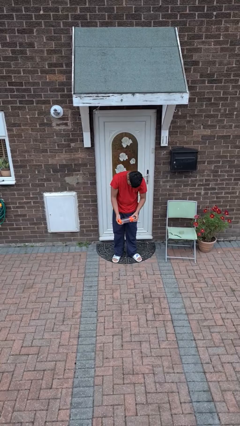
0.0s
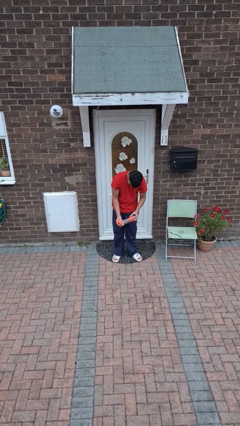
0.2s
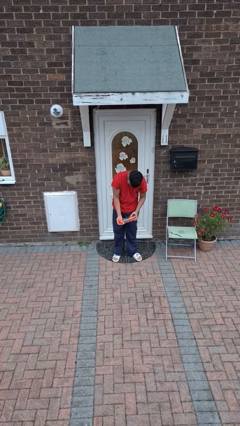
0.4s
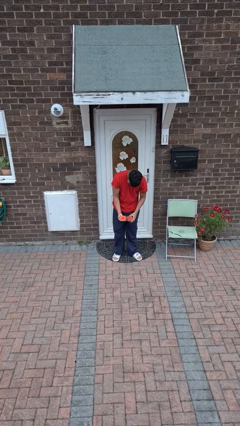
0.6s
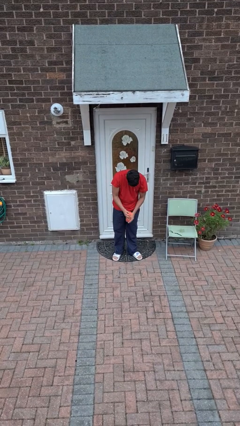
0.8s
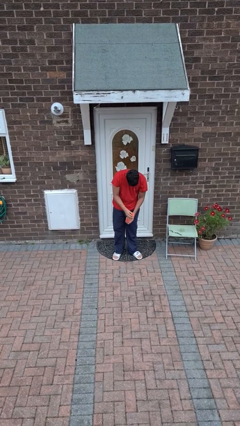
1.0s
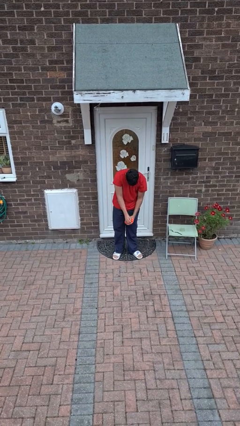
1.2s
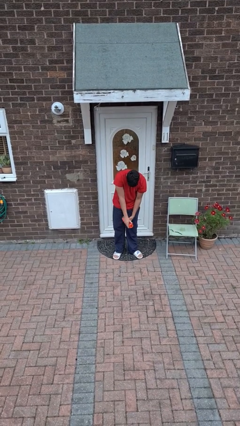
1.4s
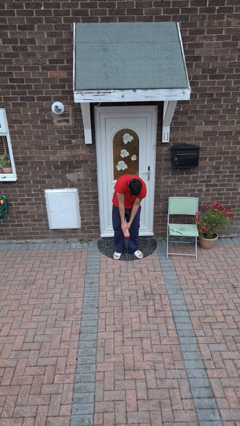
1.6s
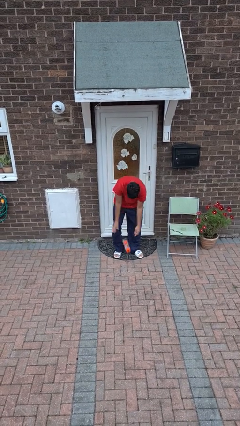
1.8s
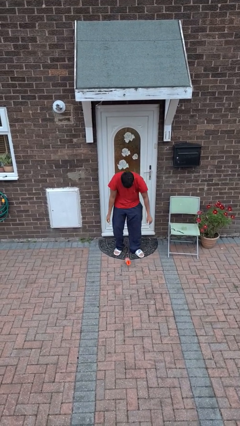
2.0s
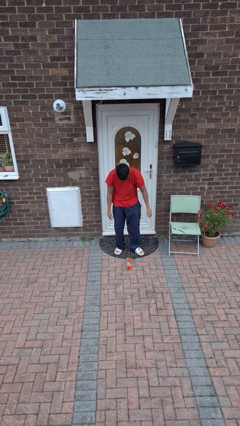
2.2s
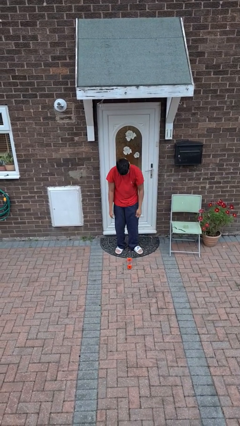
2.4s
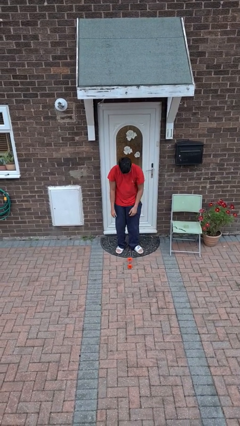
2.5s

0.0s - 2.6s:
person drops object

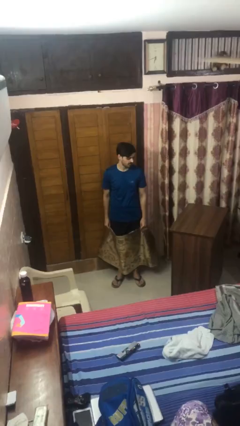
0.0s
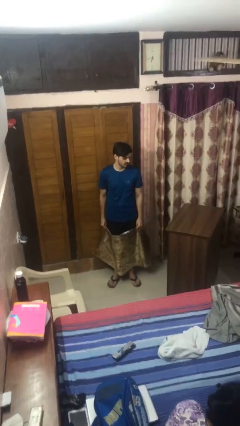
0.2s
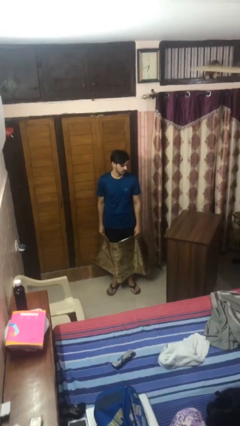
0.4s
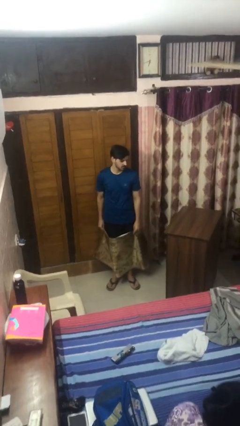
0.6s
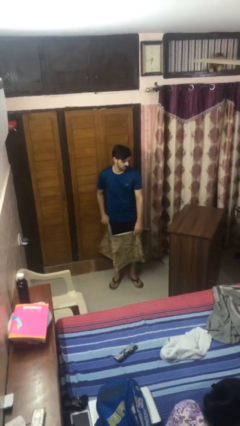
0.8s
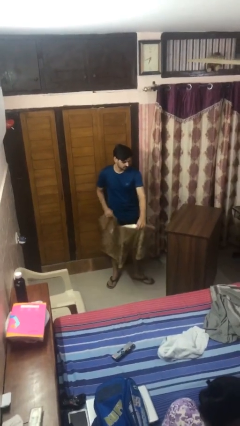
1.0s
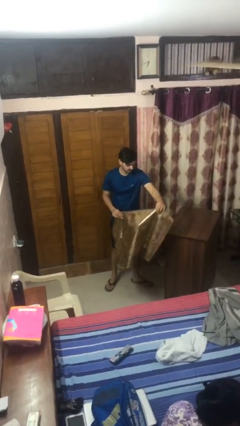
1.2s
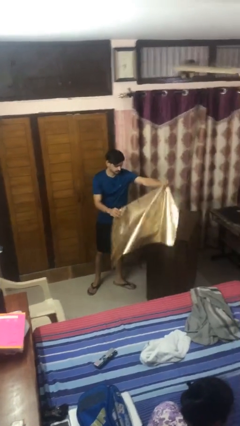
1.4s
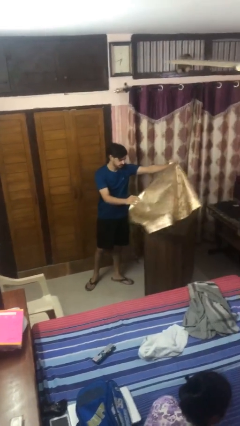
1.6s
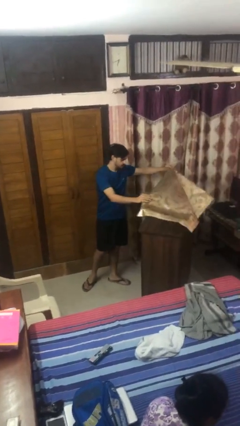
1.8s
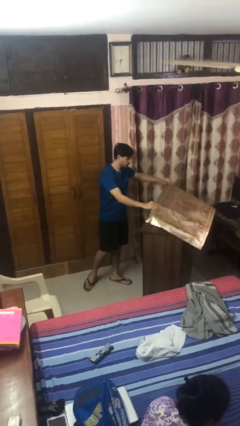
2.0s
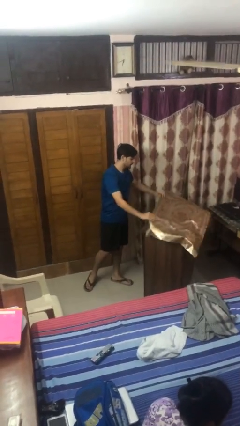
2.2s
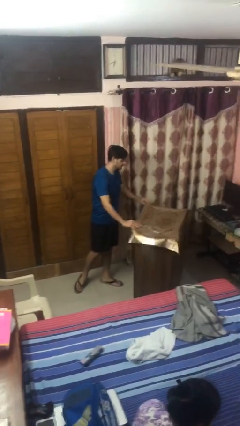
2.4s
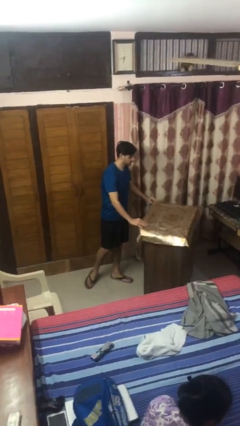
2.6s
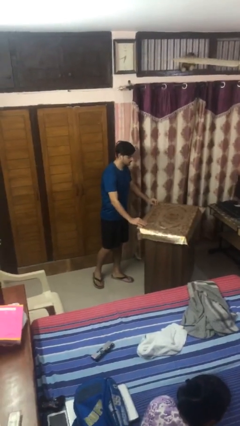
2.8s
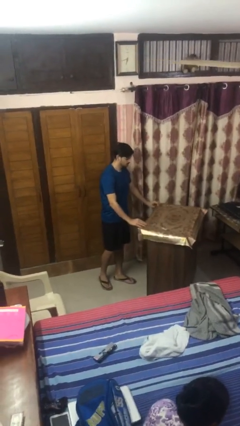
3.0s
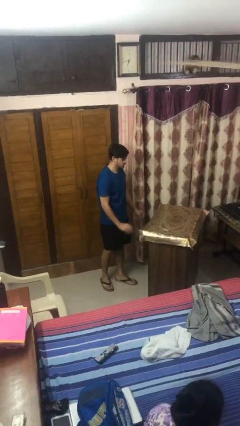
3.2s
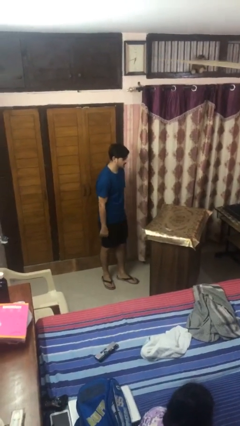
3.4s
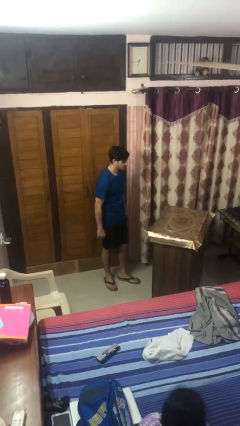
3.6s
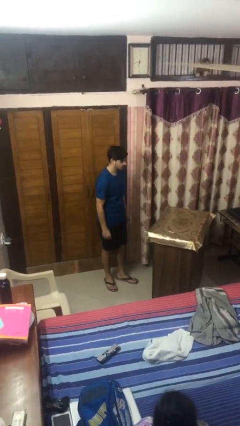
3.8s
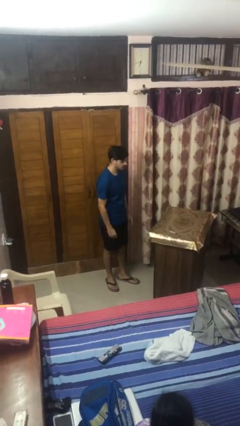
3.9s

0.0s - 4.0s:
person spreads tablecloth

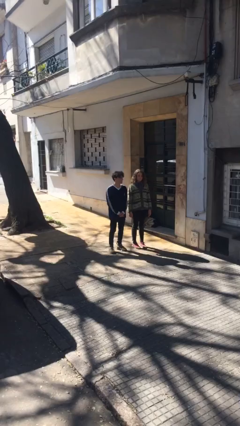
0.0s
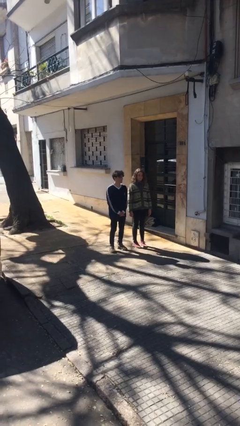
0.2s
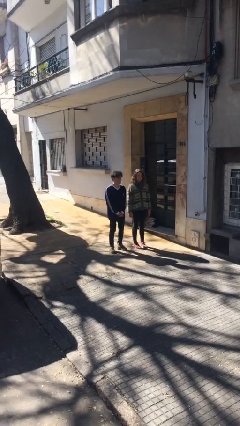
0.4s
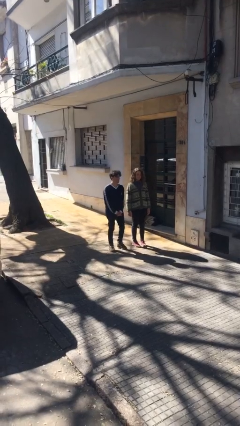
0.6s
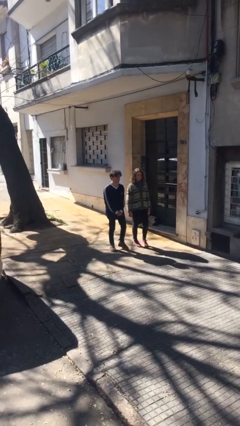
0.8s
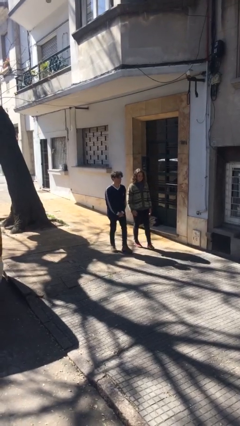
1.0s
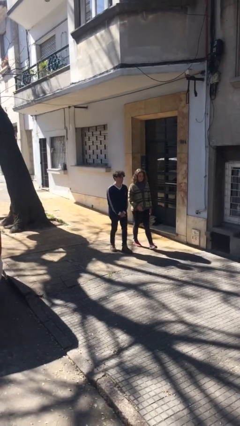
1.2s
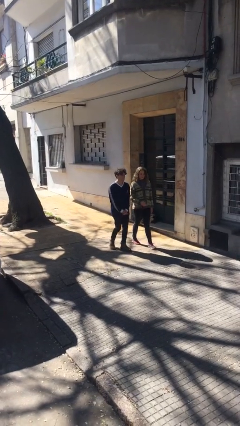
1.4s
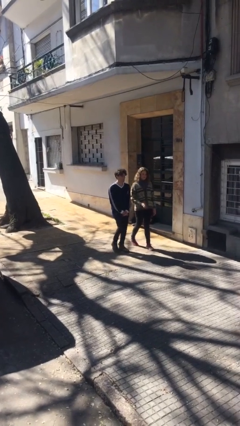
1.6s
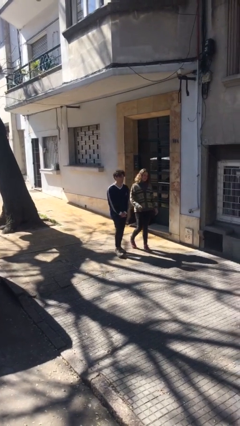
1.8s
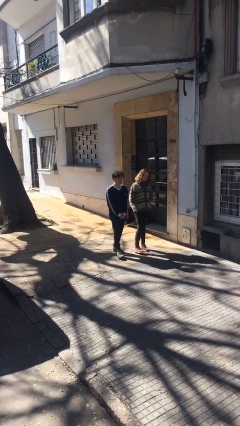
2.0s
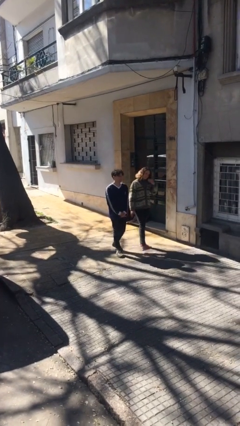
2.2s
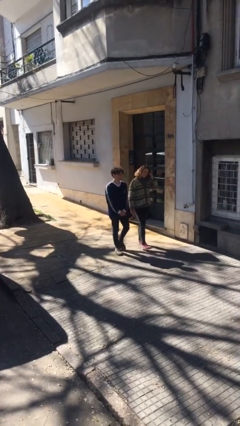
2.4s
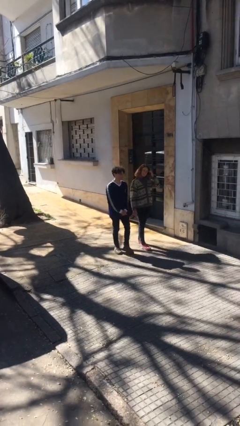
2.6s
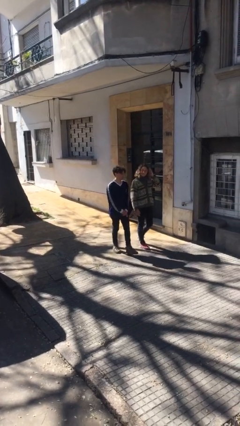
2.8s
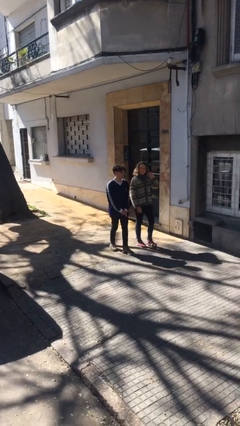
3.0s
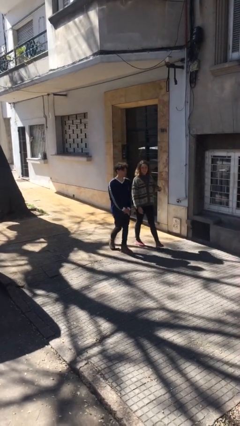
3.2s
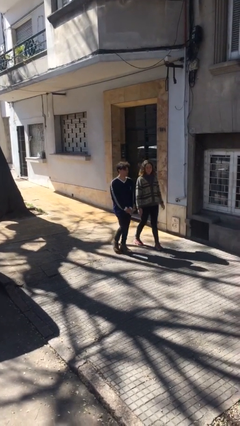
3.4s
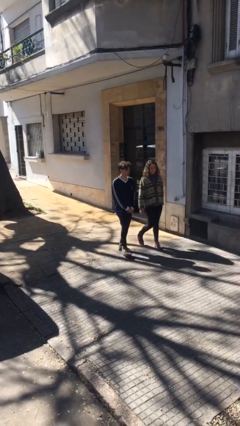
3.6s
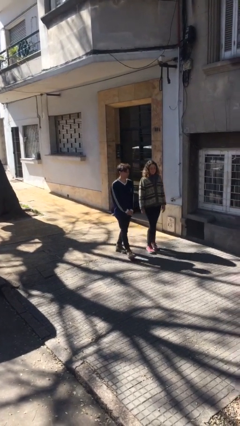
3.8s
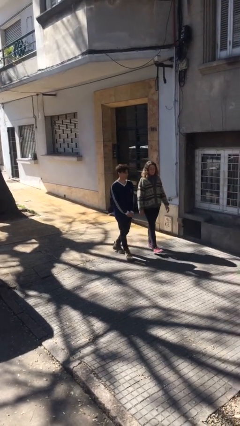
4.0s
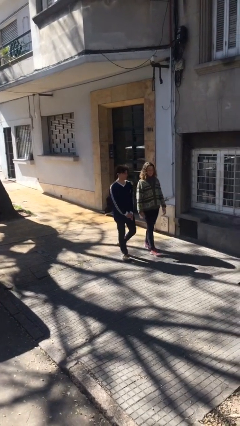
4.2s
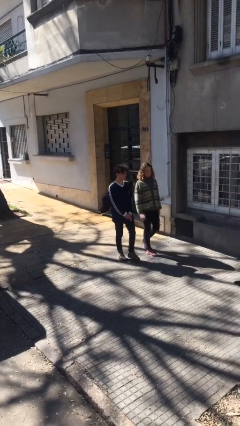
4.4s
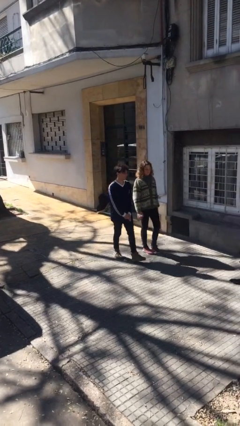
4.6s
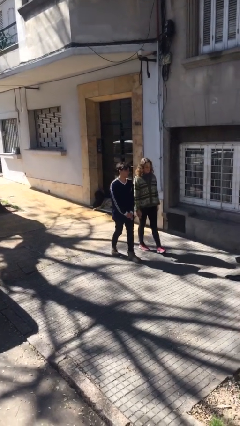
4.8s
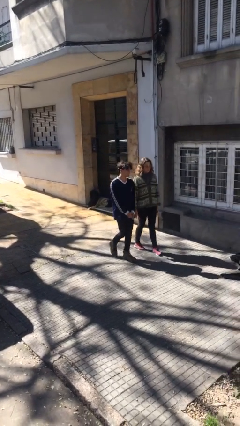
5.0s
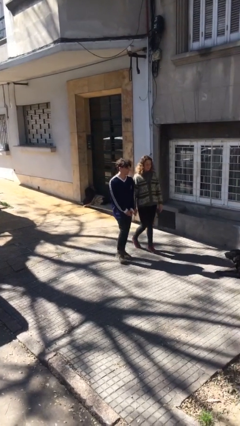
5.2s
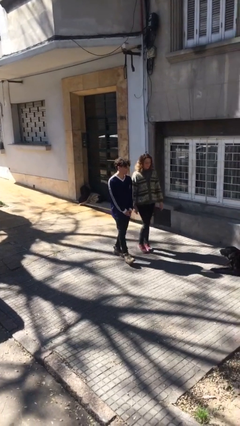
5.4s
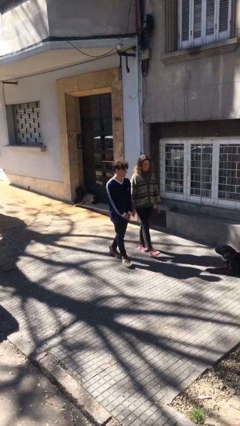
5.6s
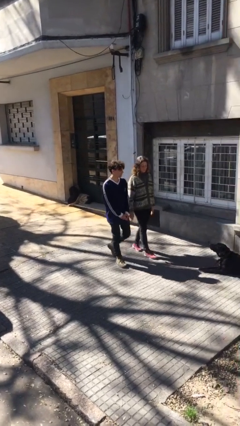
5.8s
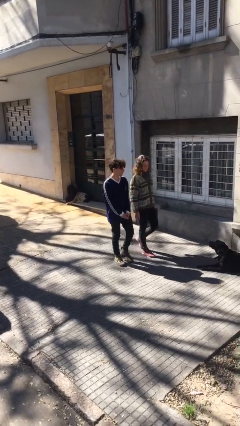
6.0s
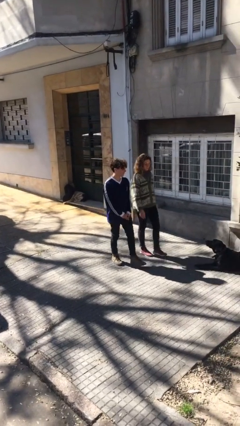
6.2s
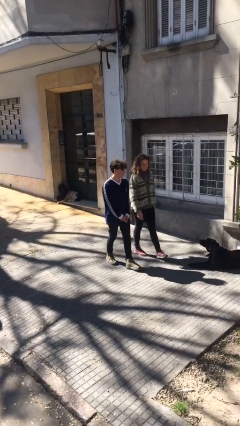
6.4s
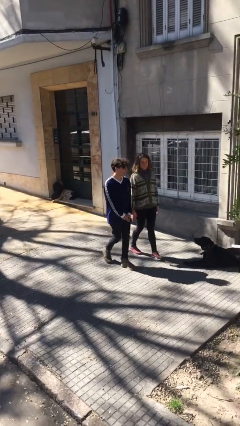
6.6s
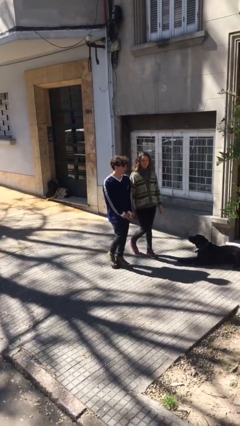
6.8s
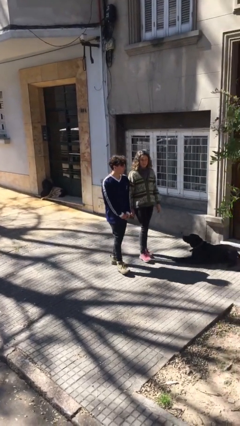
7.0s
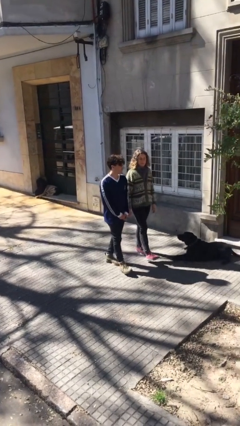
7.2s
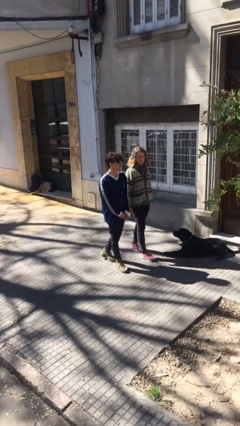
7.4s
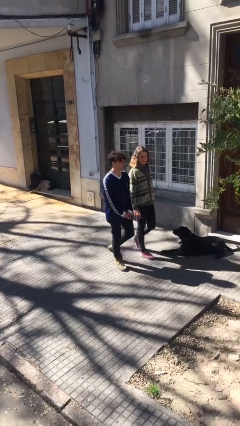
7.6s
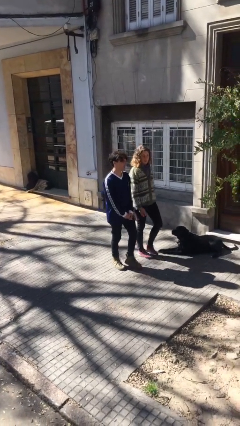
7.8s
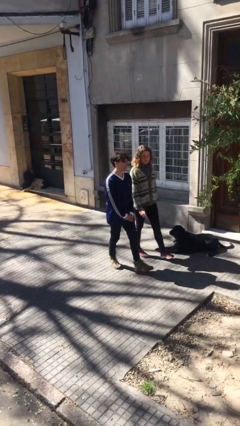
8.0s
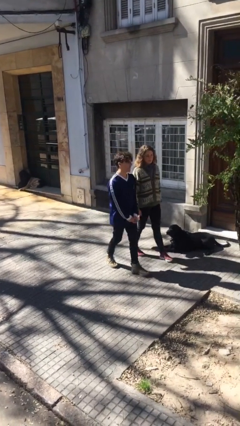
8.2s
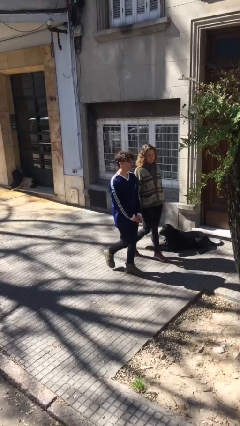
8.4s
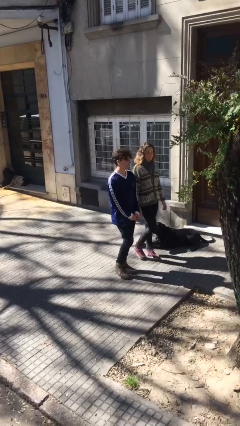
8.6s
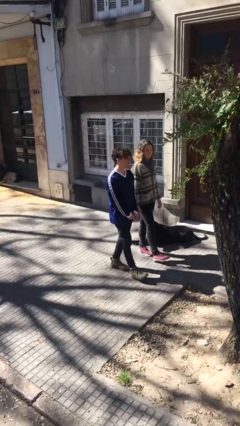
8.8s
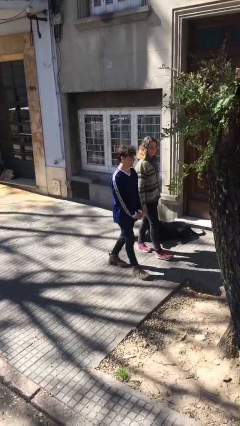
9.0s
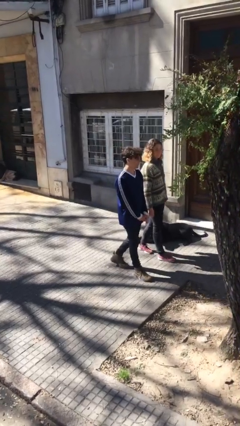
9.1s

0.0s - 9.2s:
person talks to person

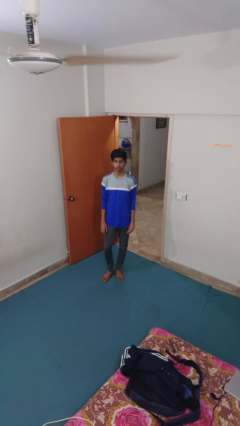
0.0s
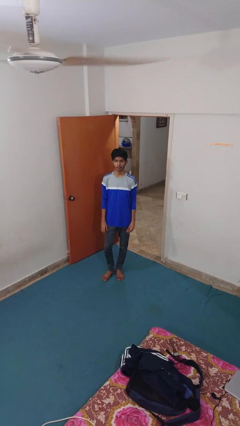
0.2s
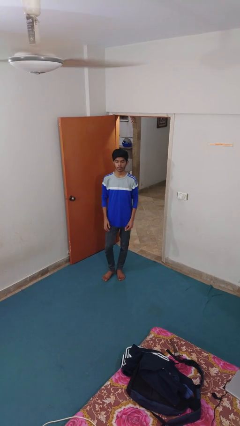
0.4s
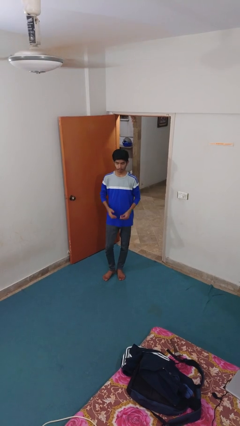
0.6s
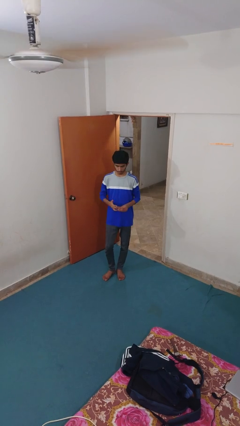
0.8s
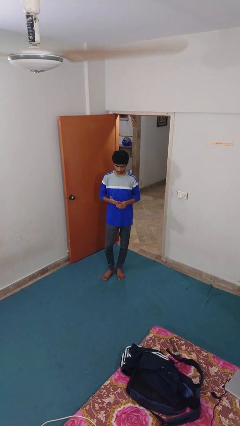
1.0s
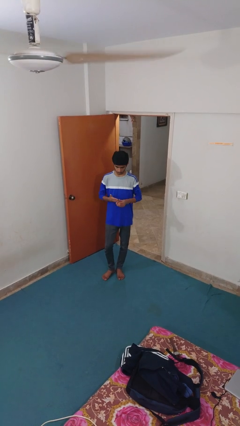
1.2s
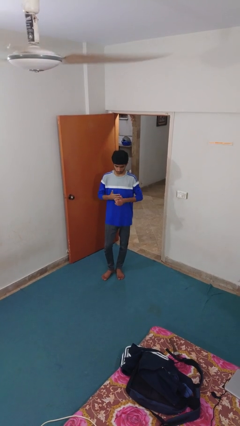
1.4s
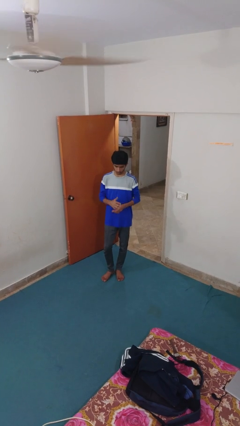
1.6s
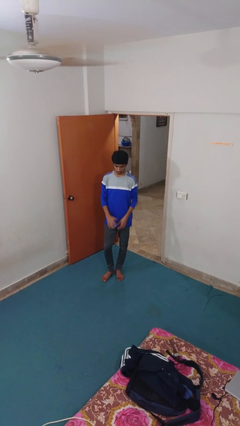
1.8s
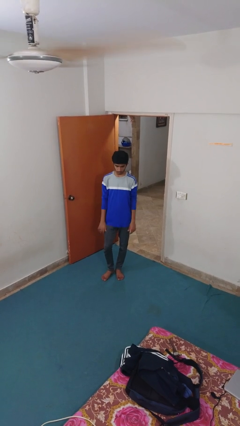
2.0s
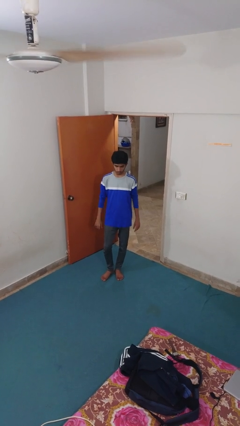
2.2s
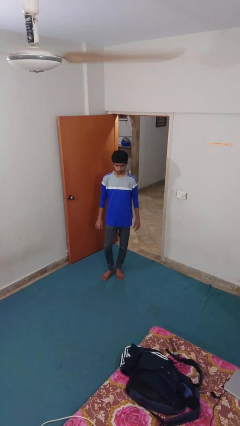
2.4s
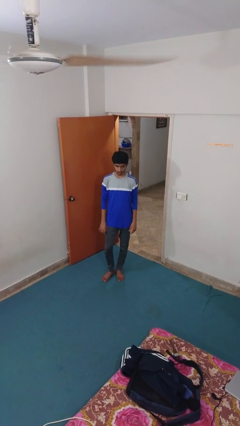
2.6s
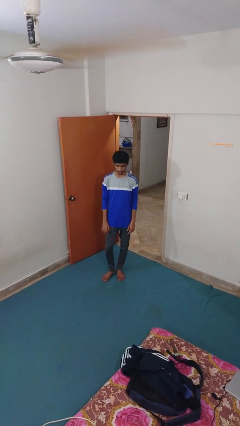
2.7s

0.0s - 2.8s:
person puts on ring
